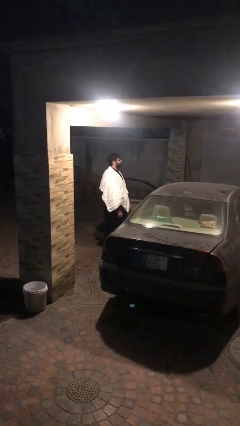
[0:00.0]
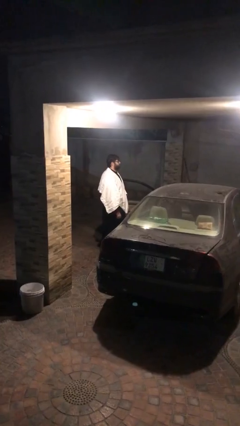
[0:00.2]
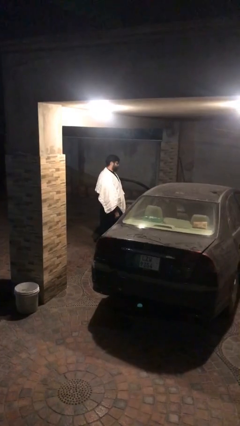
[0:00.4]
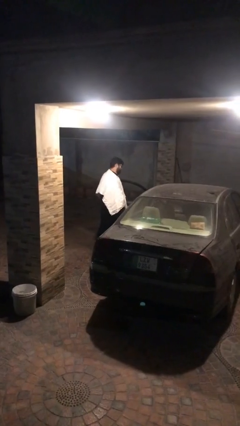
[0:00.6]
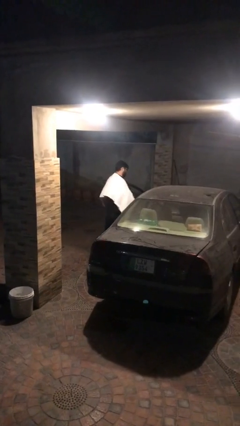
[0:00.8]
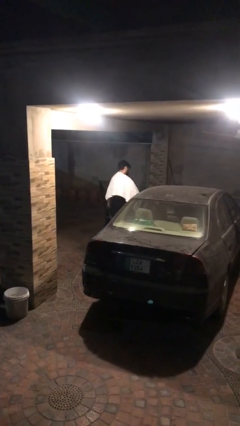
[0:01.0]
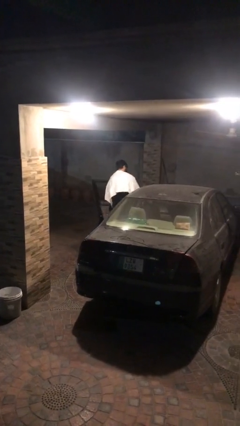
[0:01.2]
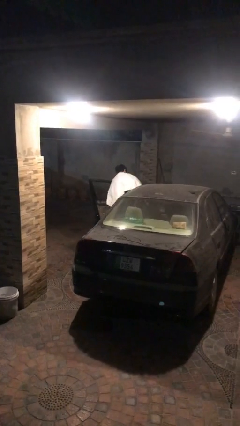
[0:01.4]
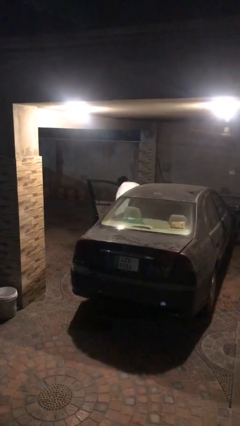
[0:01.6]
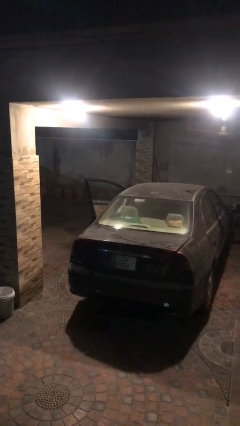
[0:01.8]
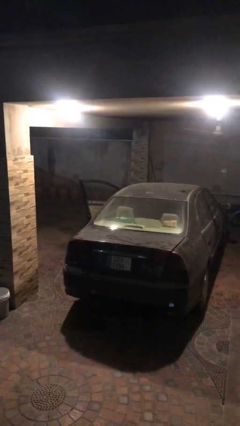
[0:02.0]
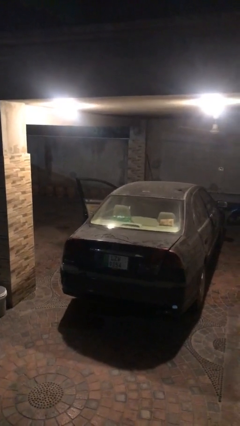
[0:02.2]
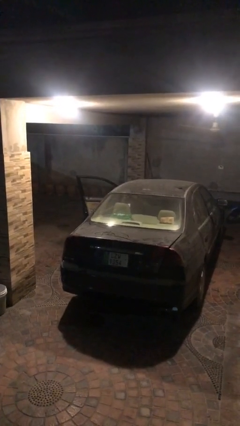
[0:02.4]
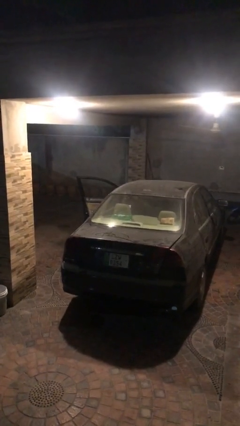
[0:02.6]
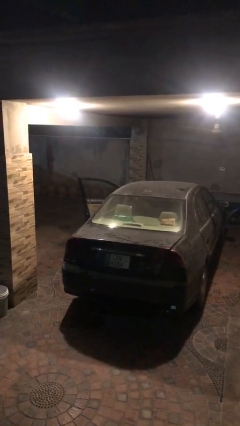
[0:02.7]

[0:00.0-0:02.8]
person enters car

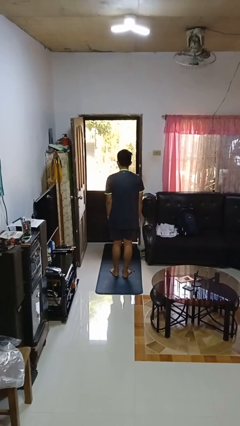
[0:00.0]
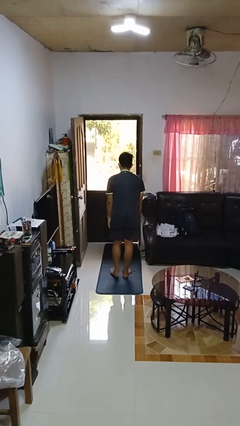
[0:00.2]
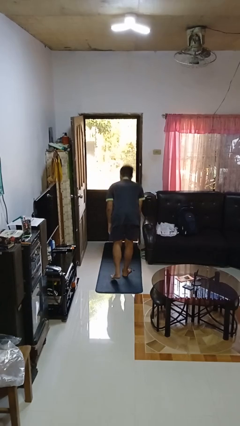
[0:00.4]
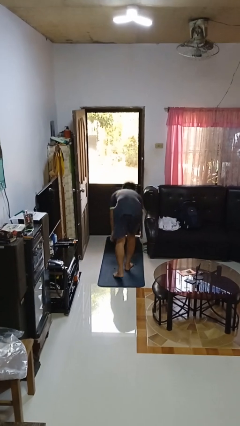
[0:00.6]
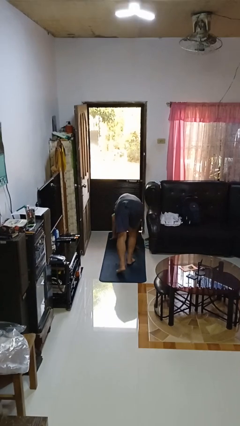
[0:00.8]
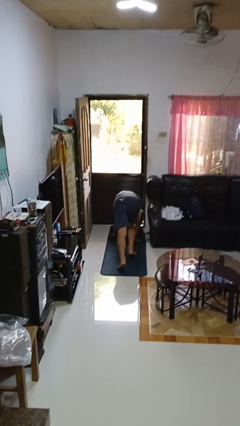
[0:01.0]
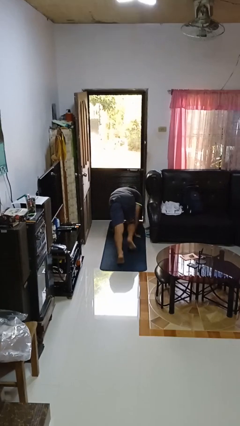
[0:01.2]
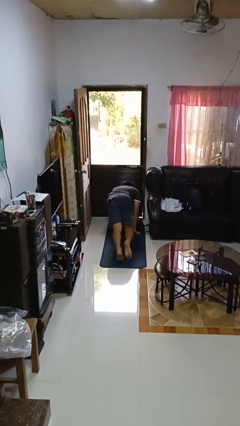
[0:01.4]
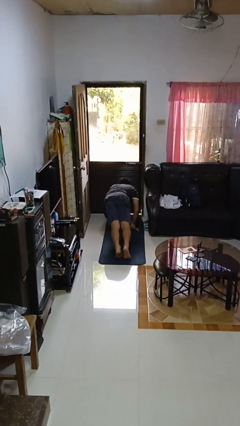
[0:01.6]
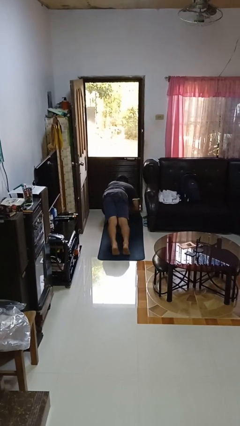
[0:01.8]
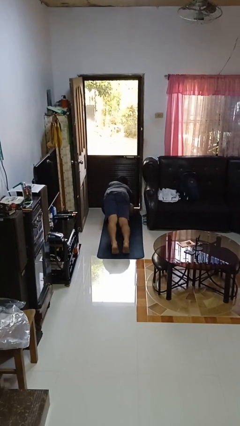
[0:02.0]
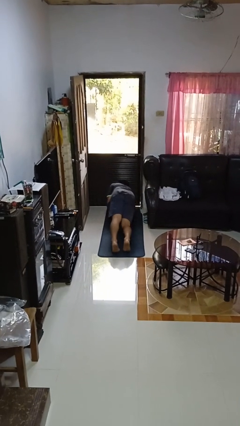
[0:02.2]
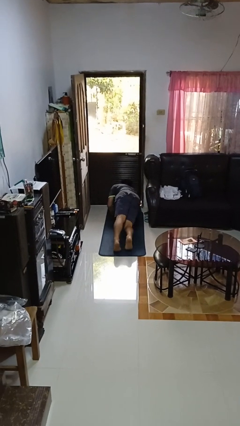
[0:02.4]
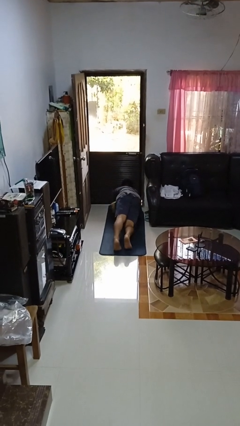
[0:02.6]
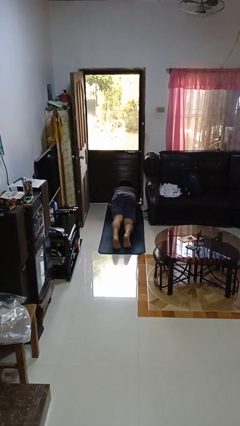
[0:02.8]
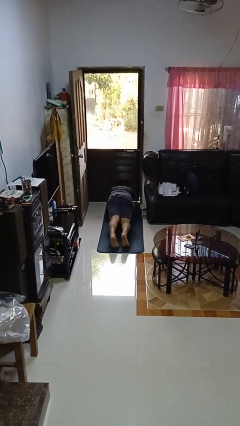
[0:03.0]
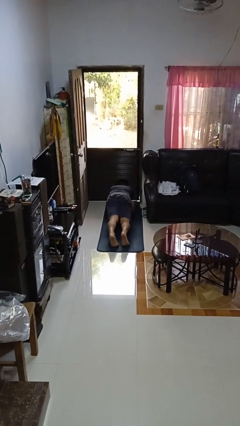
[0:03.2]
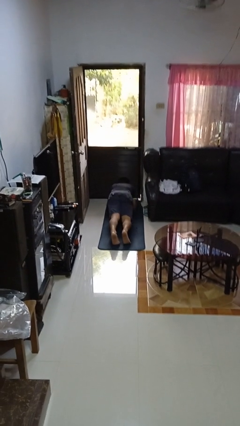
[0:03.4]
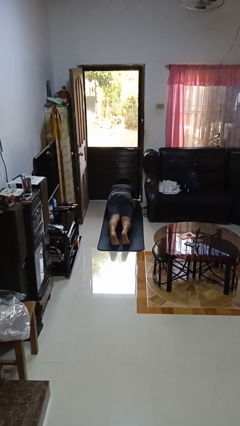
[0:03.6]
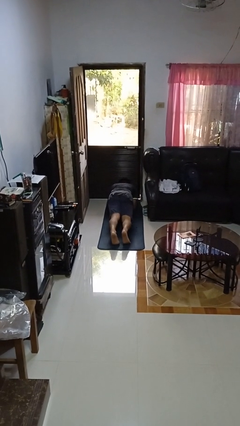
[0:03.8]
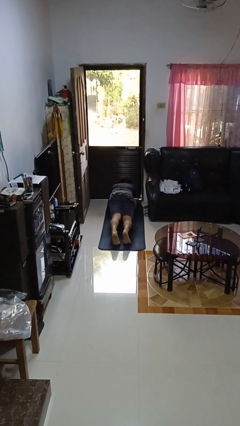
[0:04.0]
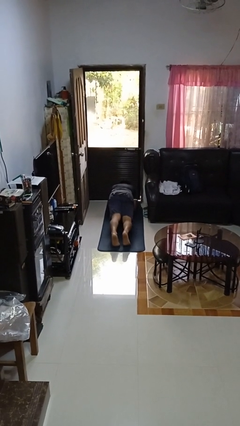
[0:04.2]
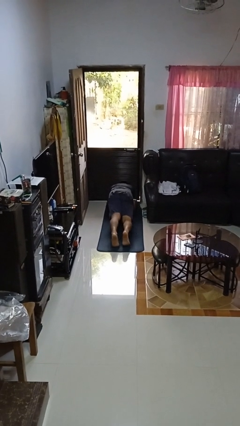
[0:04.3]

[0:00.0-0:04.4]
person exercises with plank

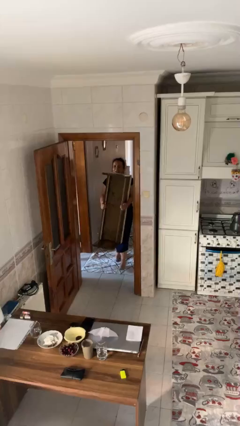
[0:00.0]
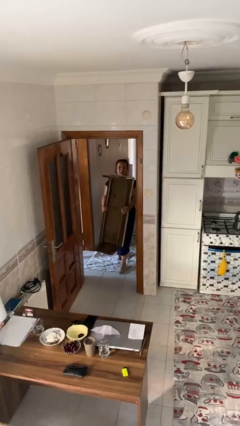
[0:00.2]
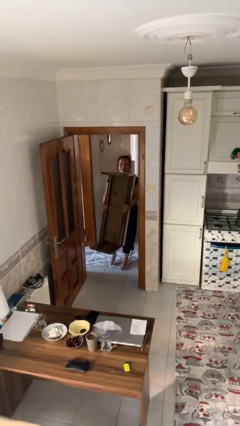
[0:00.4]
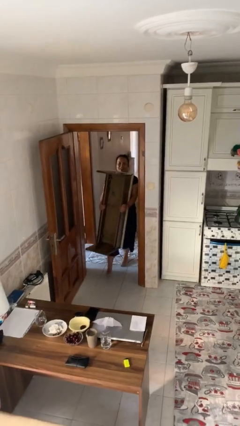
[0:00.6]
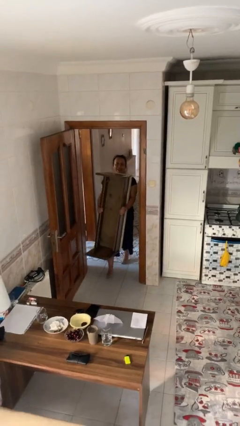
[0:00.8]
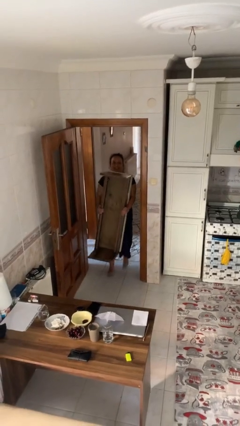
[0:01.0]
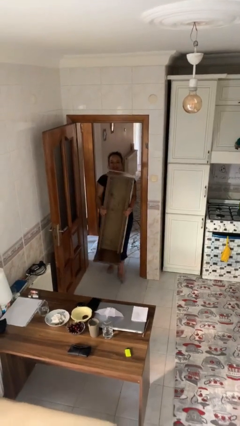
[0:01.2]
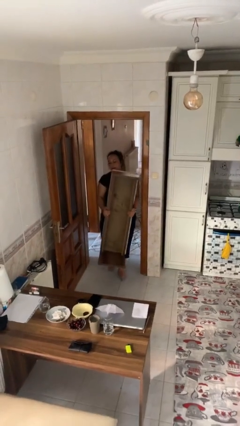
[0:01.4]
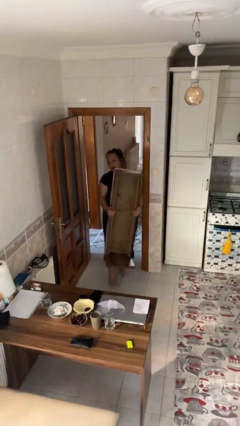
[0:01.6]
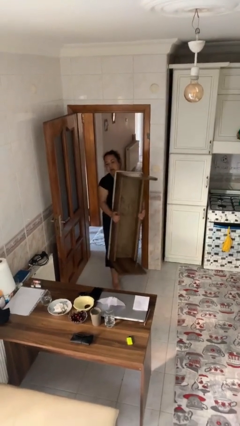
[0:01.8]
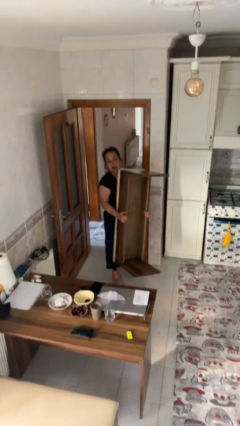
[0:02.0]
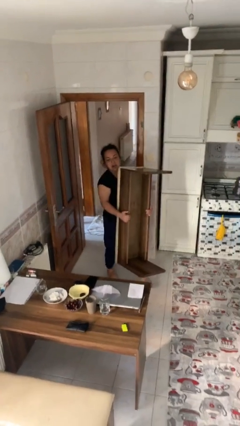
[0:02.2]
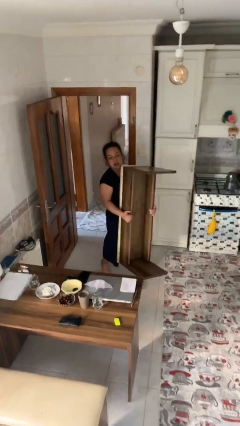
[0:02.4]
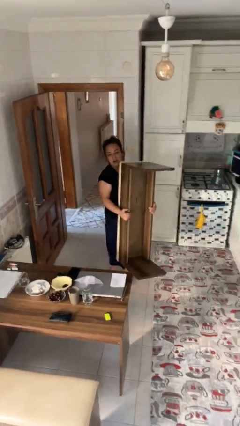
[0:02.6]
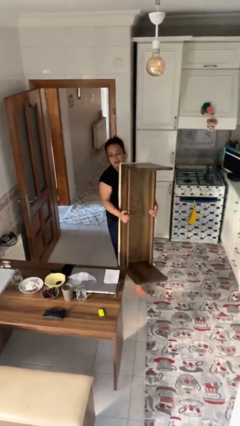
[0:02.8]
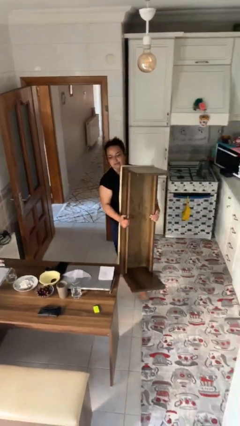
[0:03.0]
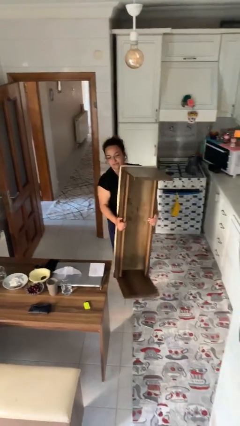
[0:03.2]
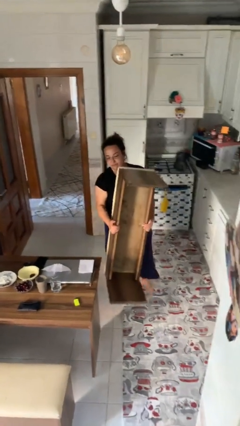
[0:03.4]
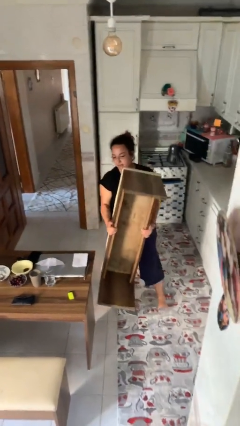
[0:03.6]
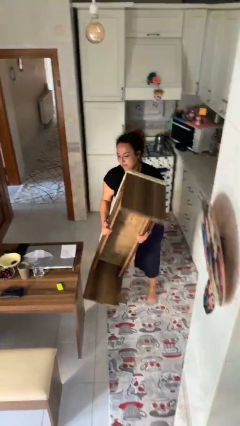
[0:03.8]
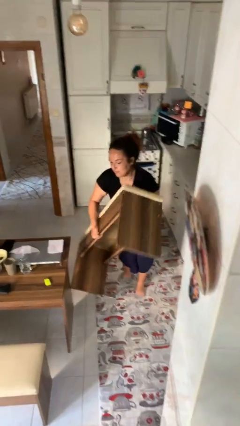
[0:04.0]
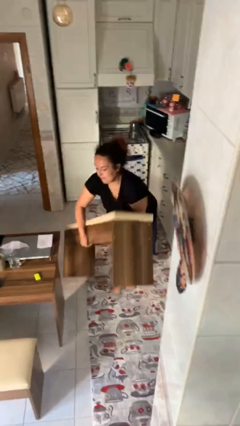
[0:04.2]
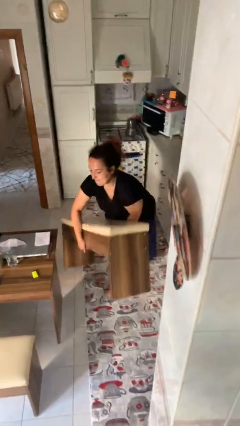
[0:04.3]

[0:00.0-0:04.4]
person carries heavy object

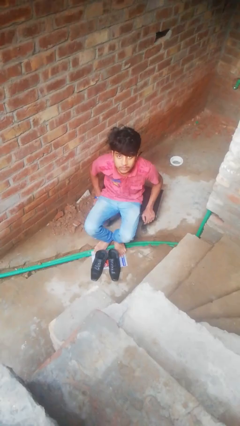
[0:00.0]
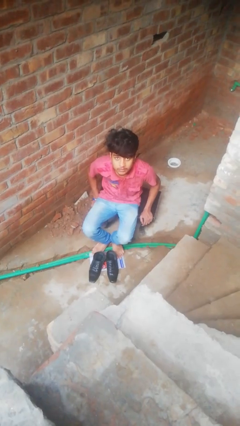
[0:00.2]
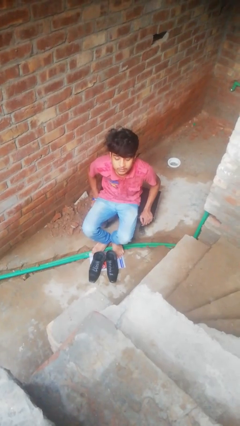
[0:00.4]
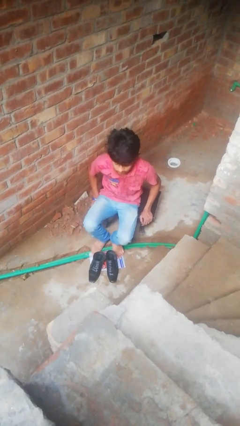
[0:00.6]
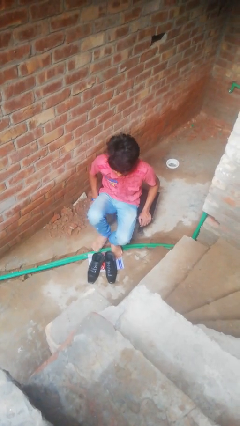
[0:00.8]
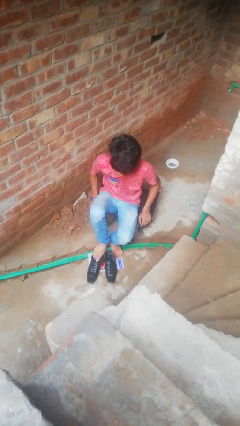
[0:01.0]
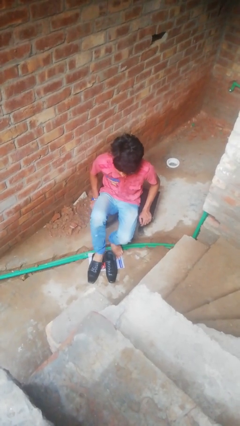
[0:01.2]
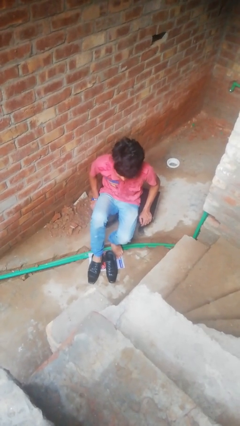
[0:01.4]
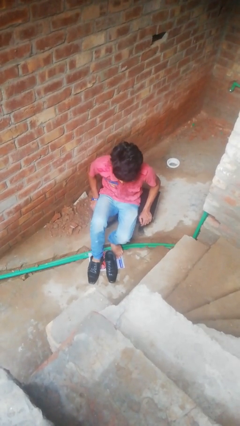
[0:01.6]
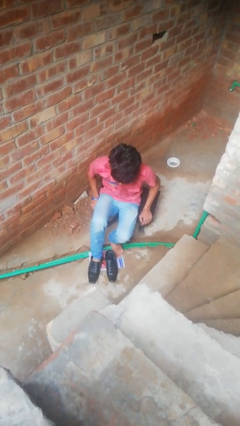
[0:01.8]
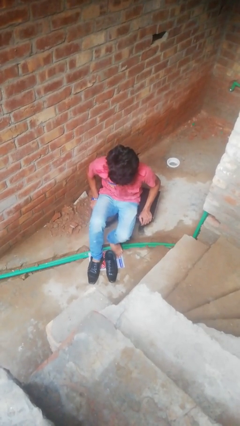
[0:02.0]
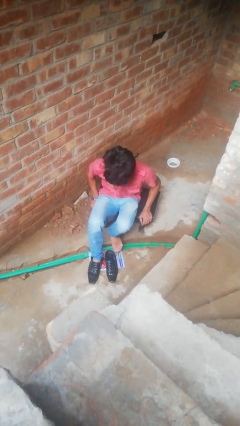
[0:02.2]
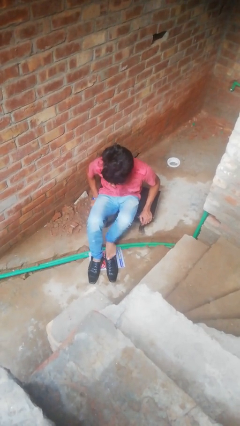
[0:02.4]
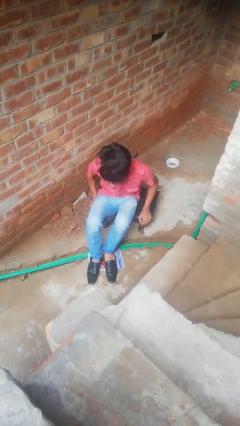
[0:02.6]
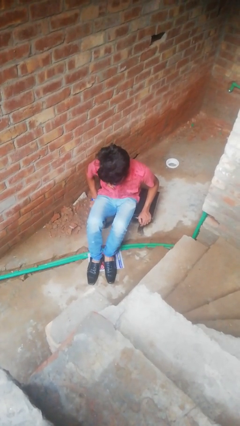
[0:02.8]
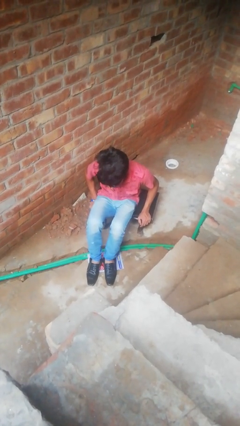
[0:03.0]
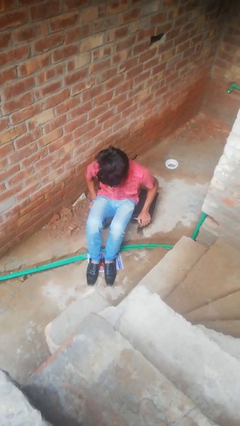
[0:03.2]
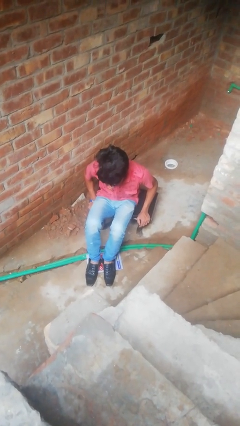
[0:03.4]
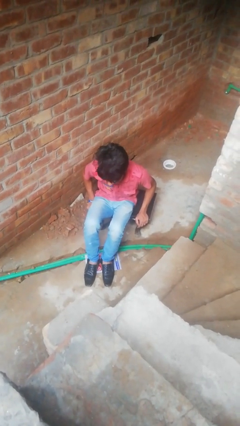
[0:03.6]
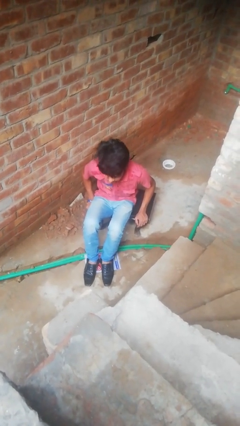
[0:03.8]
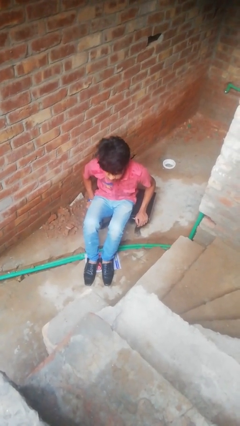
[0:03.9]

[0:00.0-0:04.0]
person puts on shoes

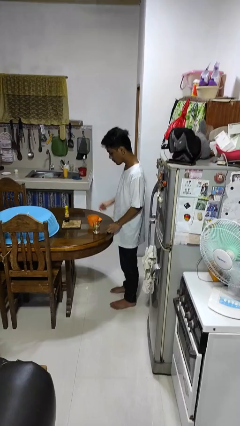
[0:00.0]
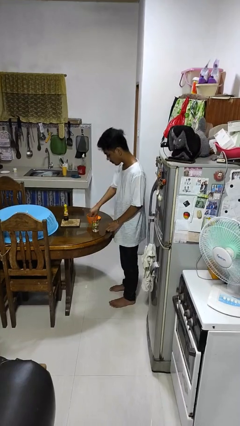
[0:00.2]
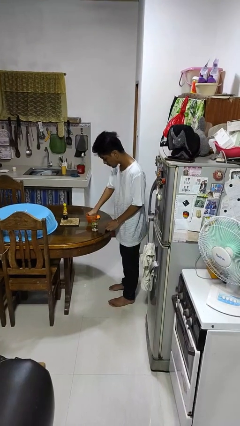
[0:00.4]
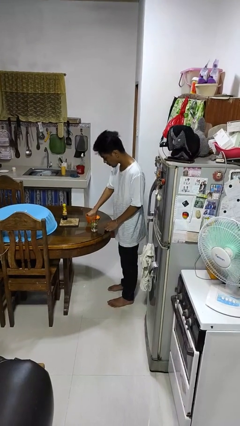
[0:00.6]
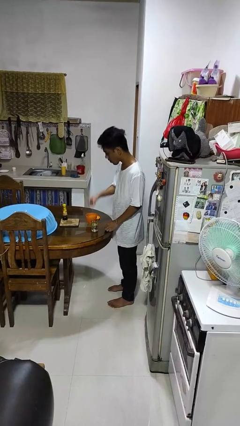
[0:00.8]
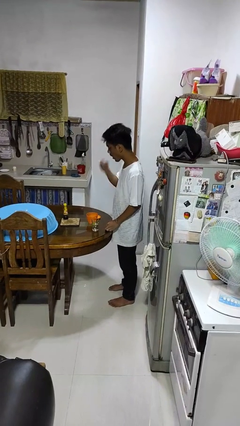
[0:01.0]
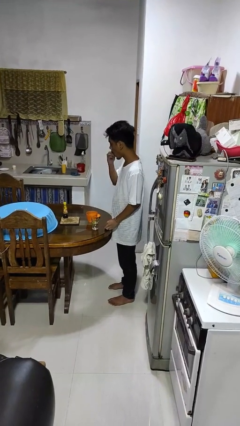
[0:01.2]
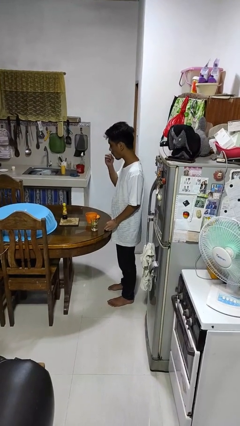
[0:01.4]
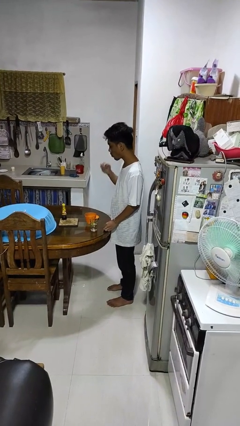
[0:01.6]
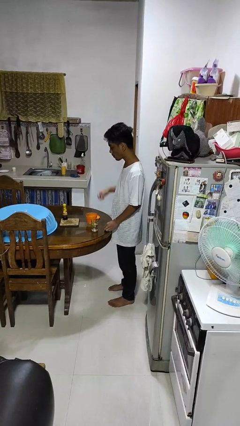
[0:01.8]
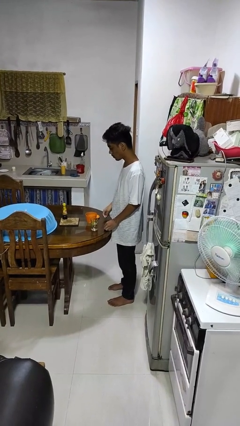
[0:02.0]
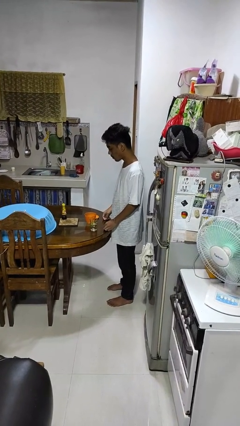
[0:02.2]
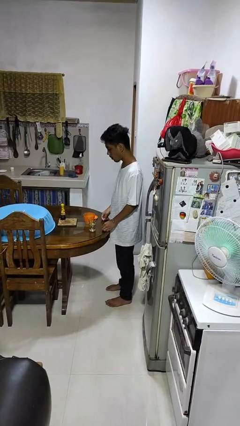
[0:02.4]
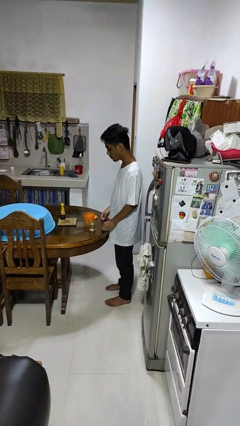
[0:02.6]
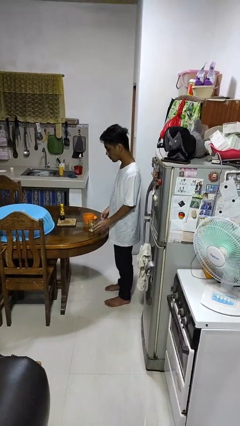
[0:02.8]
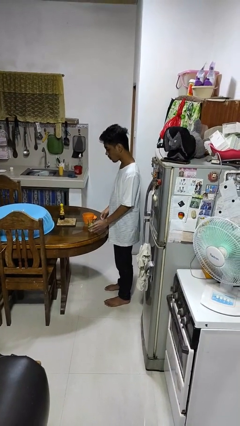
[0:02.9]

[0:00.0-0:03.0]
person takes medicine pills
